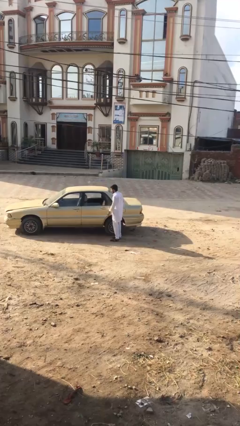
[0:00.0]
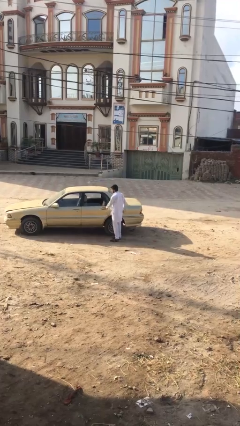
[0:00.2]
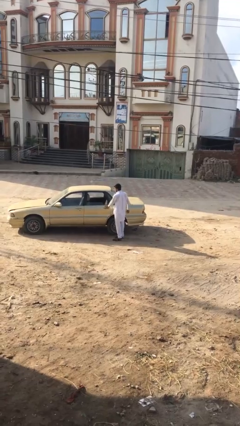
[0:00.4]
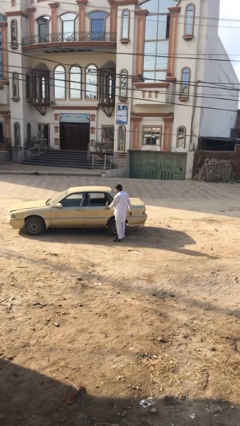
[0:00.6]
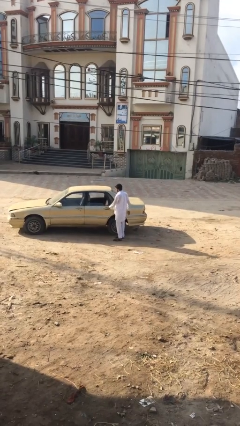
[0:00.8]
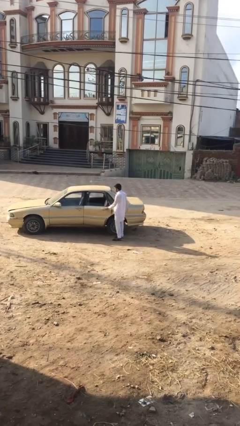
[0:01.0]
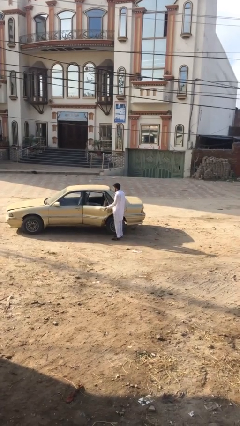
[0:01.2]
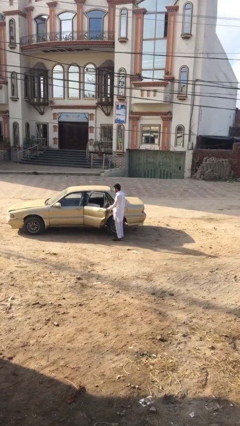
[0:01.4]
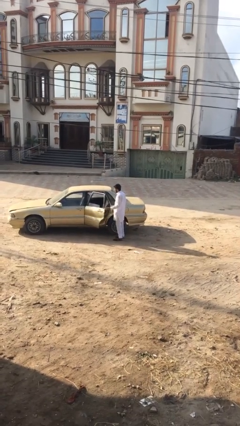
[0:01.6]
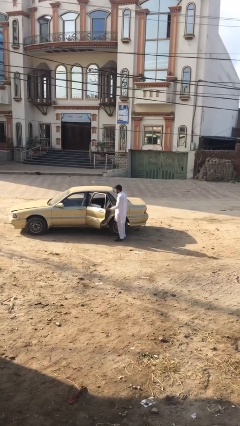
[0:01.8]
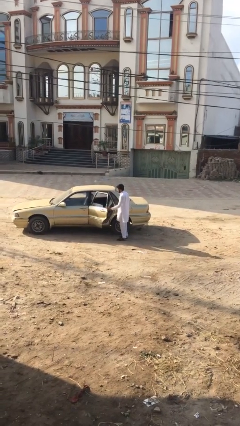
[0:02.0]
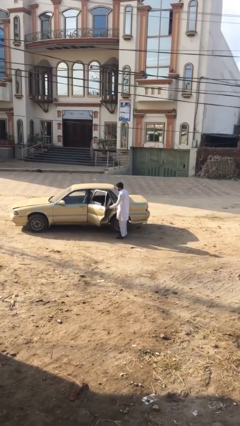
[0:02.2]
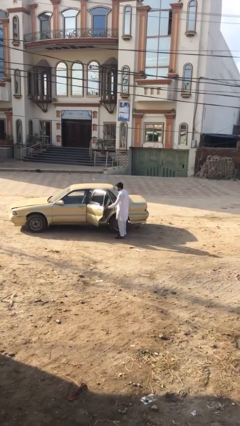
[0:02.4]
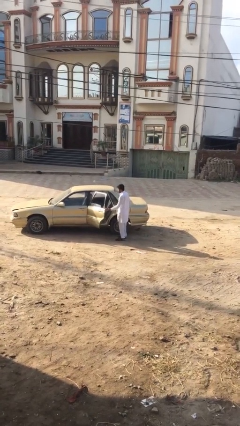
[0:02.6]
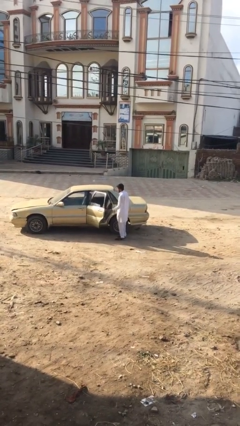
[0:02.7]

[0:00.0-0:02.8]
person opens car door

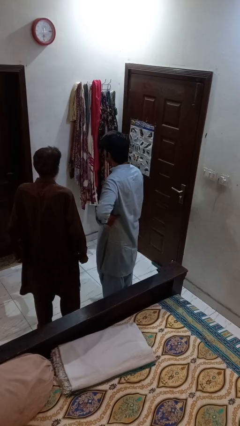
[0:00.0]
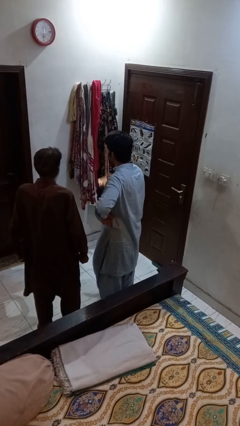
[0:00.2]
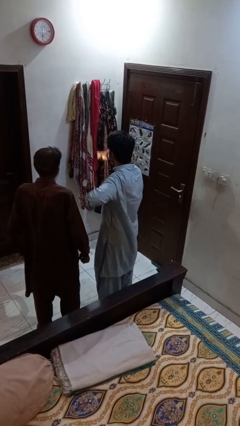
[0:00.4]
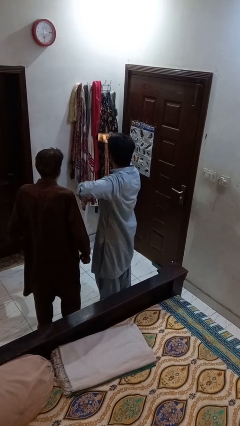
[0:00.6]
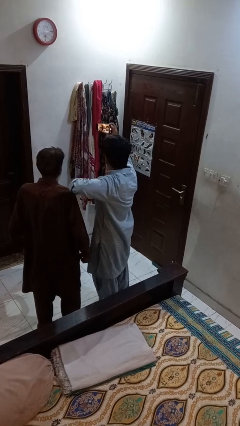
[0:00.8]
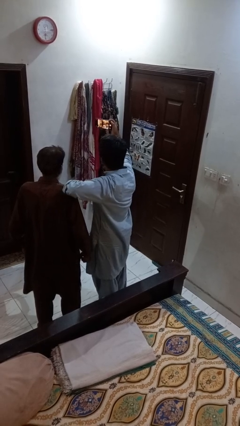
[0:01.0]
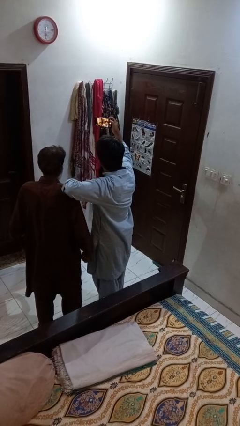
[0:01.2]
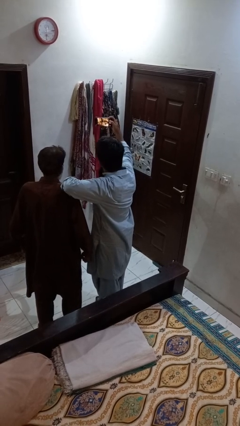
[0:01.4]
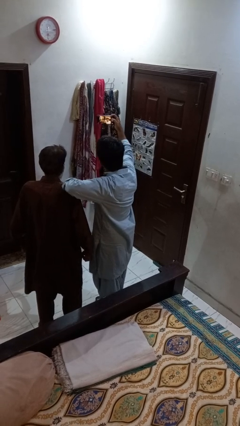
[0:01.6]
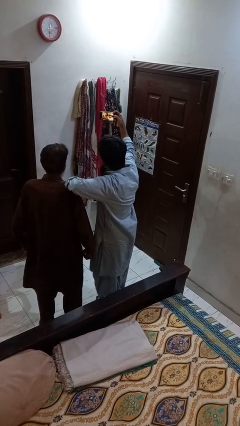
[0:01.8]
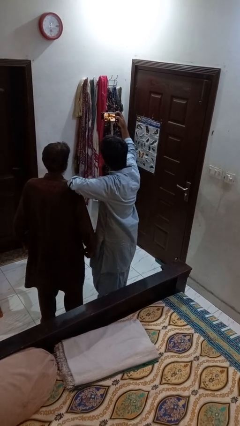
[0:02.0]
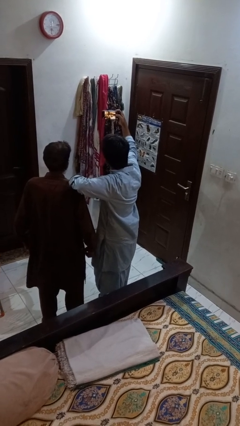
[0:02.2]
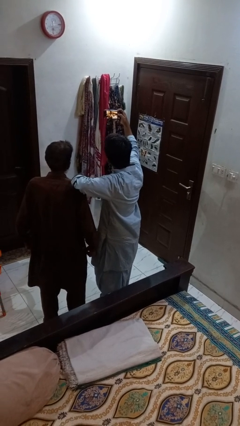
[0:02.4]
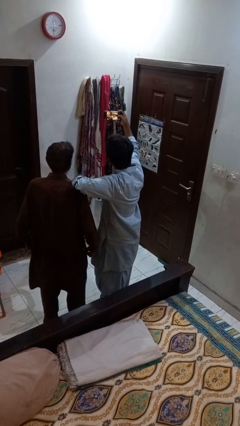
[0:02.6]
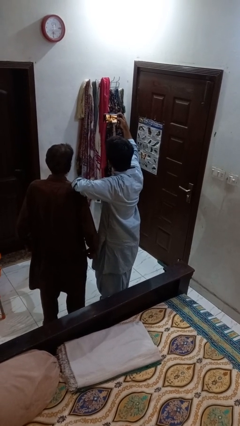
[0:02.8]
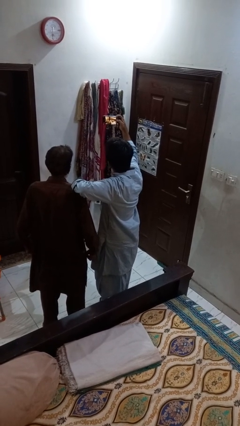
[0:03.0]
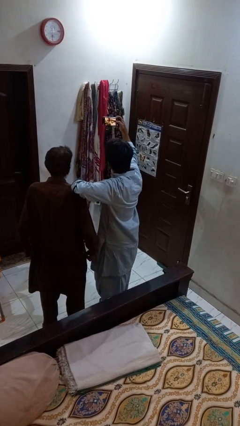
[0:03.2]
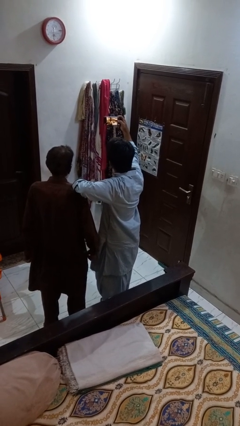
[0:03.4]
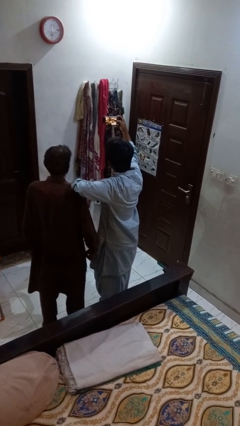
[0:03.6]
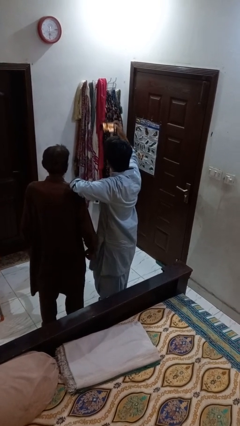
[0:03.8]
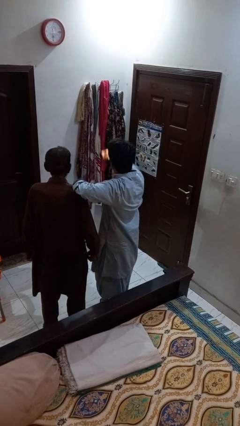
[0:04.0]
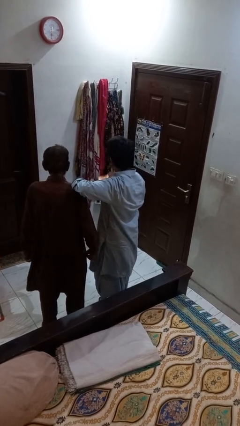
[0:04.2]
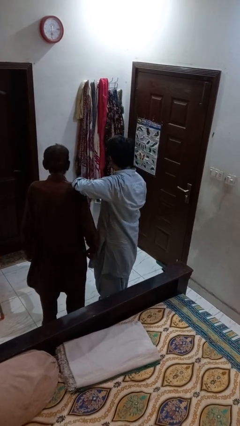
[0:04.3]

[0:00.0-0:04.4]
person takes selfie with person

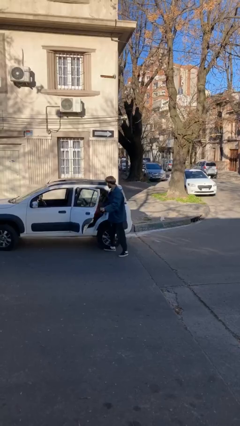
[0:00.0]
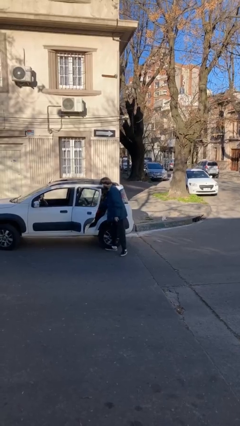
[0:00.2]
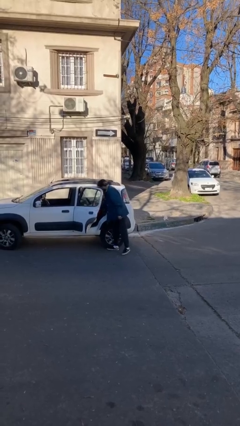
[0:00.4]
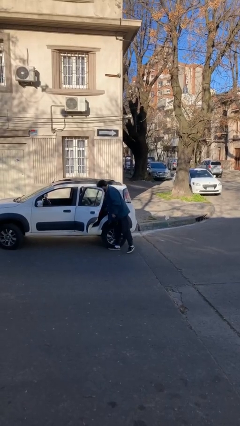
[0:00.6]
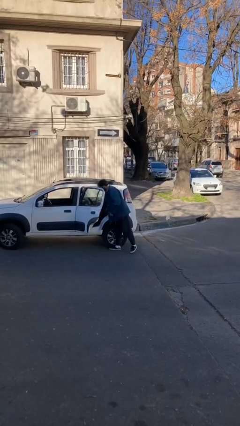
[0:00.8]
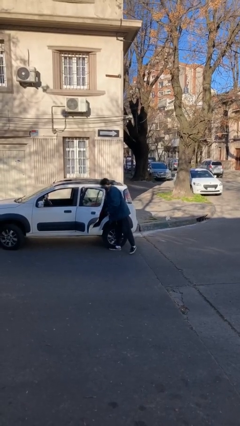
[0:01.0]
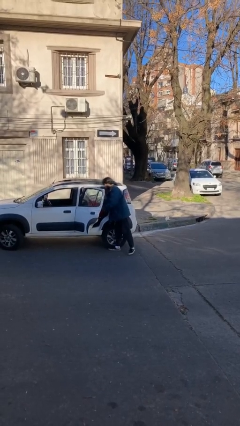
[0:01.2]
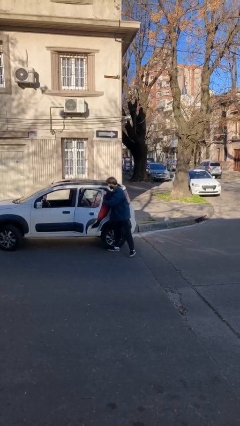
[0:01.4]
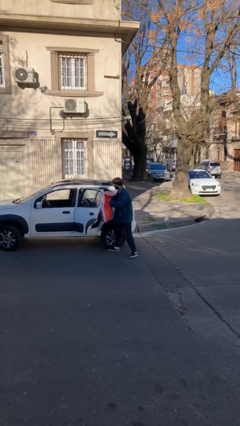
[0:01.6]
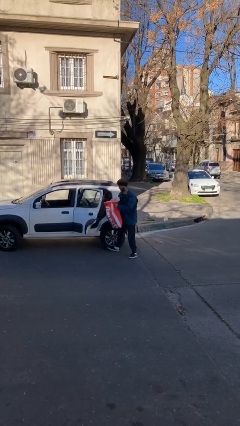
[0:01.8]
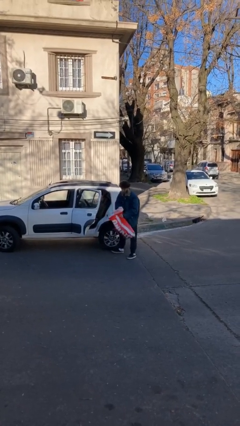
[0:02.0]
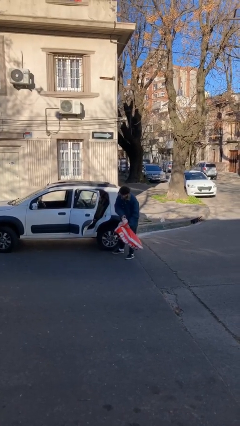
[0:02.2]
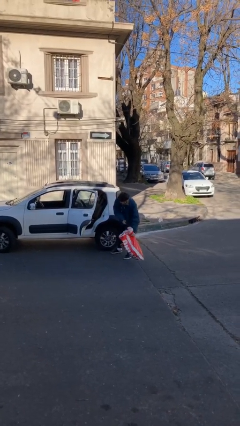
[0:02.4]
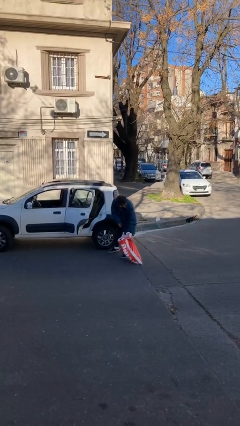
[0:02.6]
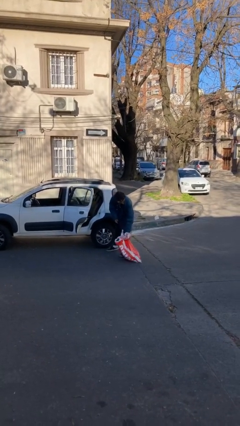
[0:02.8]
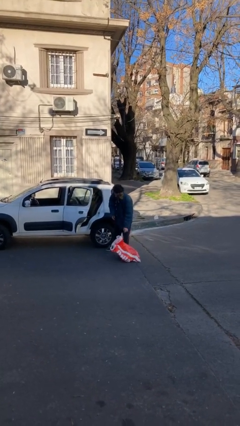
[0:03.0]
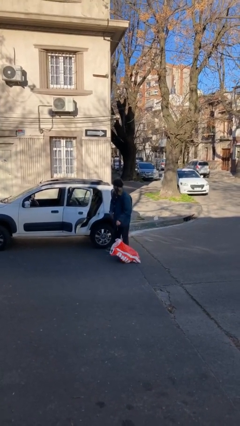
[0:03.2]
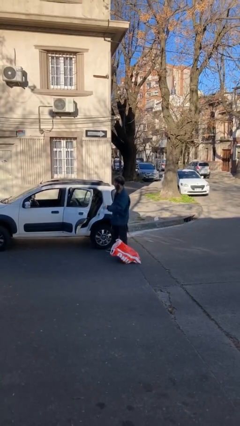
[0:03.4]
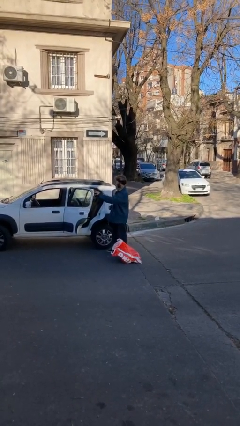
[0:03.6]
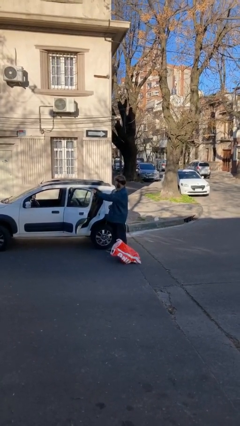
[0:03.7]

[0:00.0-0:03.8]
person unloads car

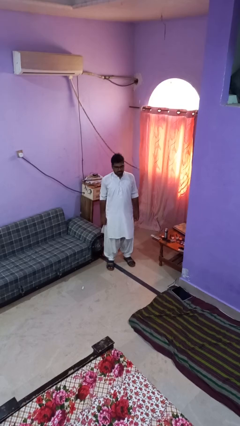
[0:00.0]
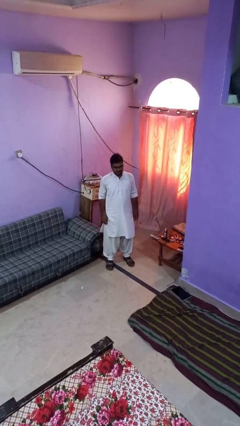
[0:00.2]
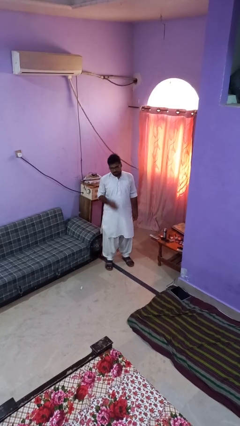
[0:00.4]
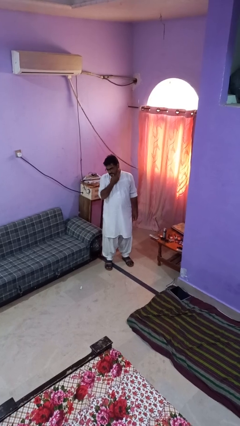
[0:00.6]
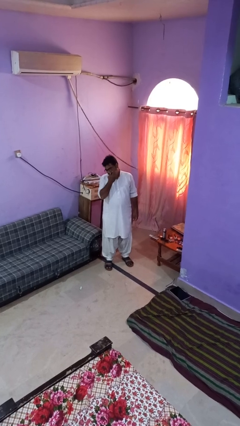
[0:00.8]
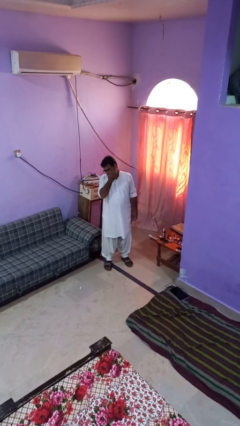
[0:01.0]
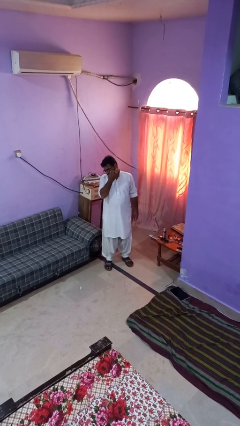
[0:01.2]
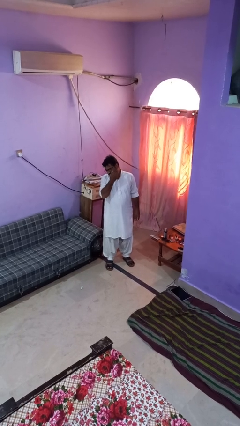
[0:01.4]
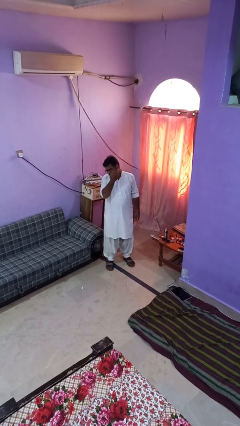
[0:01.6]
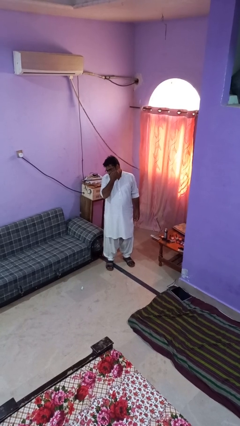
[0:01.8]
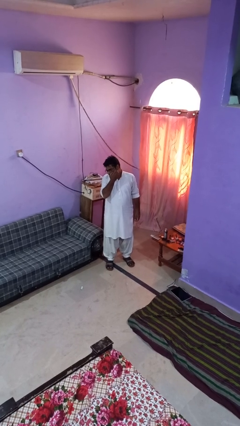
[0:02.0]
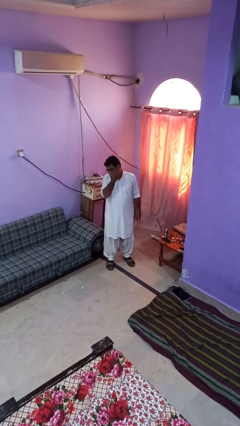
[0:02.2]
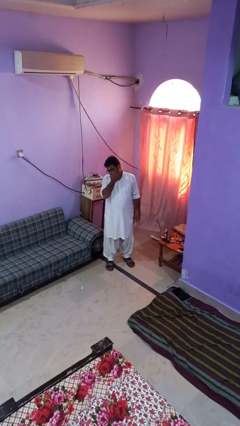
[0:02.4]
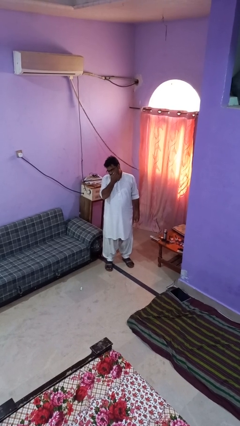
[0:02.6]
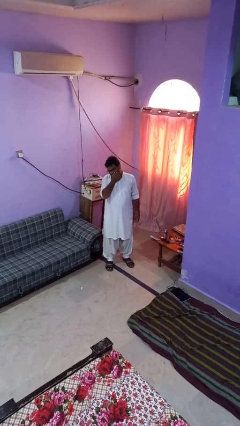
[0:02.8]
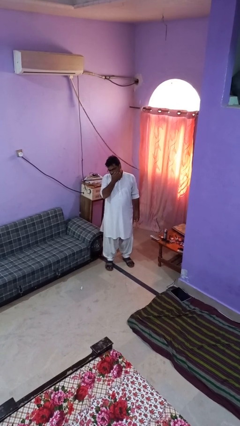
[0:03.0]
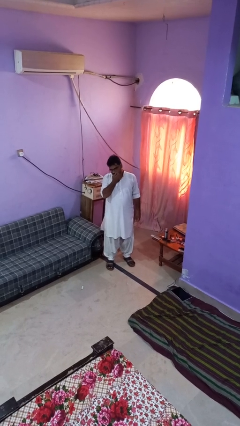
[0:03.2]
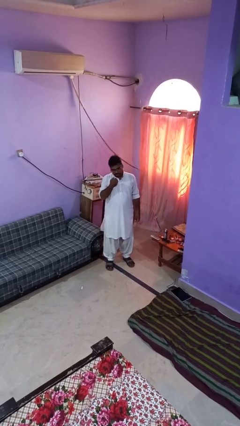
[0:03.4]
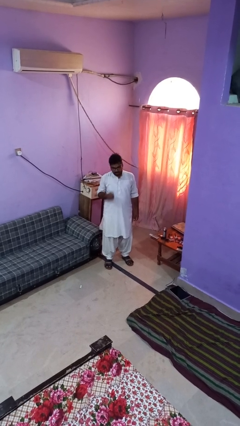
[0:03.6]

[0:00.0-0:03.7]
person scratches face

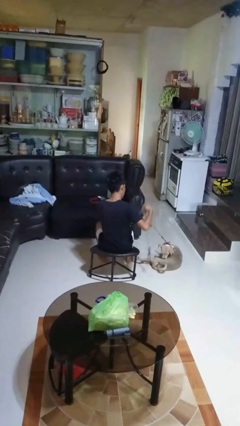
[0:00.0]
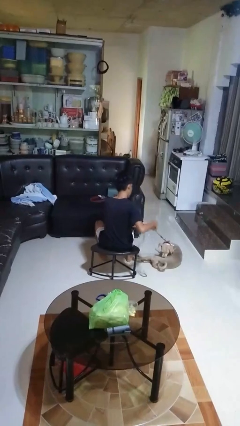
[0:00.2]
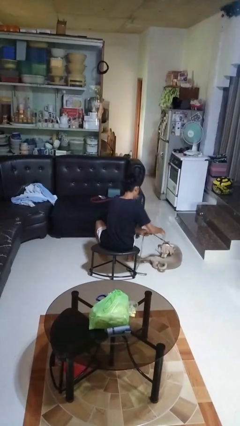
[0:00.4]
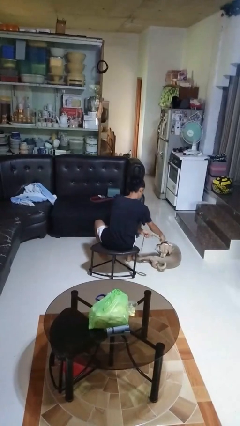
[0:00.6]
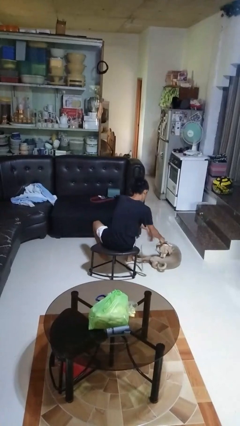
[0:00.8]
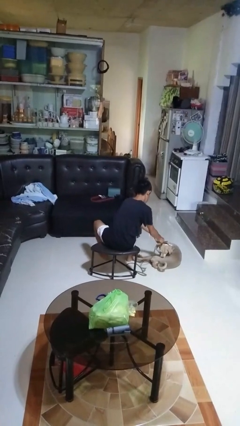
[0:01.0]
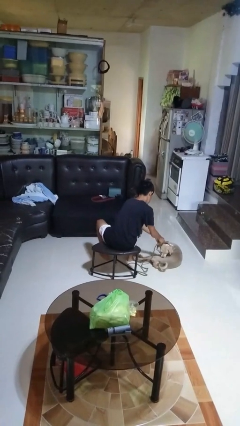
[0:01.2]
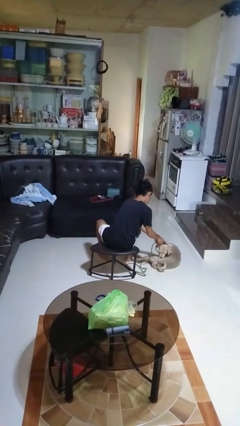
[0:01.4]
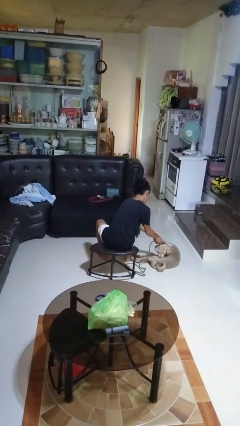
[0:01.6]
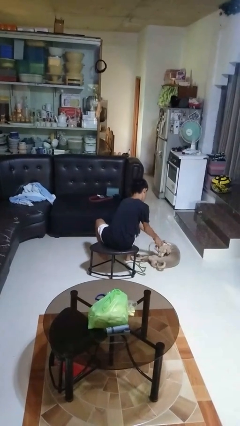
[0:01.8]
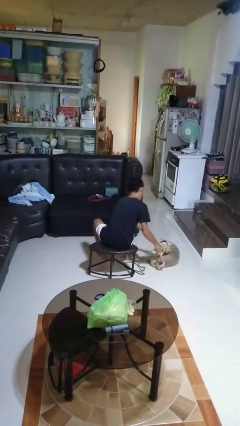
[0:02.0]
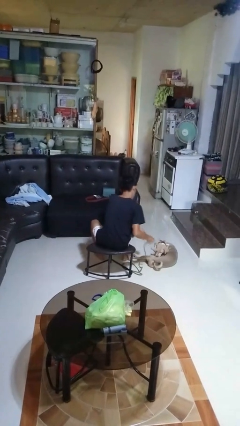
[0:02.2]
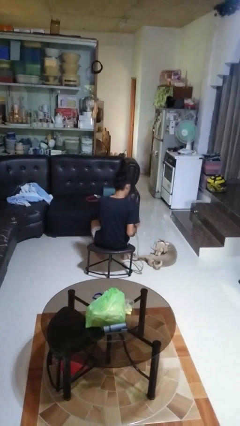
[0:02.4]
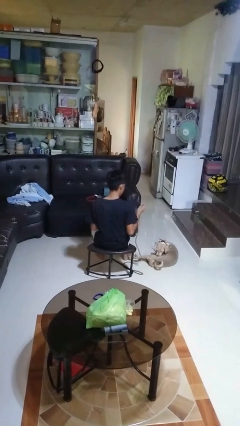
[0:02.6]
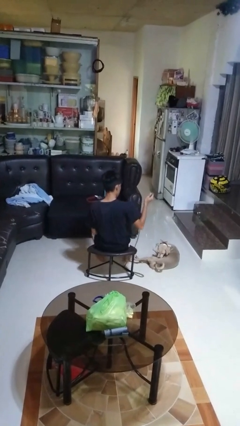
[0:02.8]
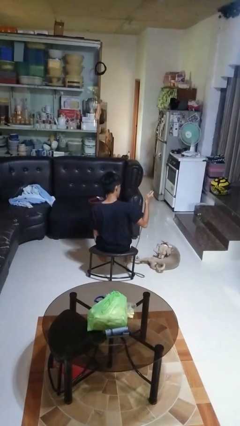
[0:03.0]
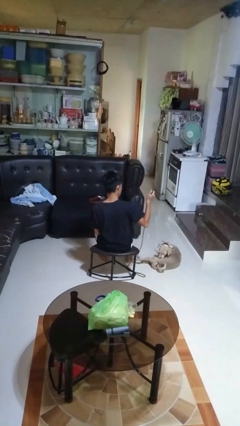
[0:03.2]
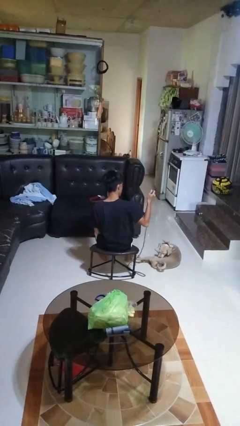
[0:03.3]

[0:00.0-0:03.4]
person unattaches leash from dog
